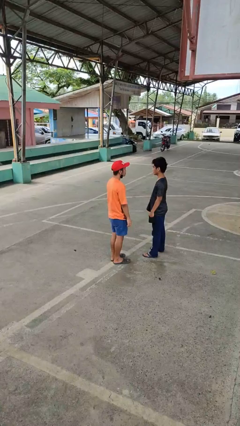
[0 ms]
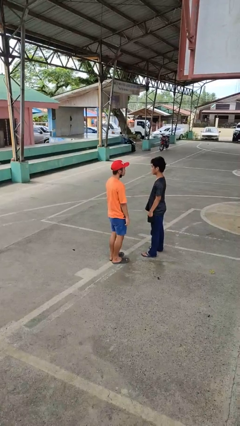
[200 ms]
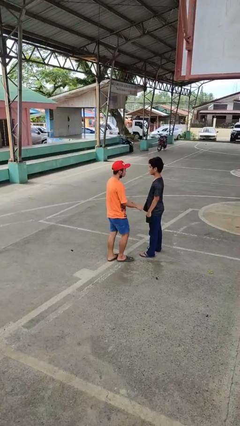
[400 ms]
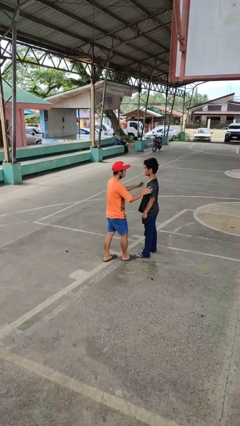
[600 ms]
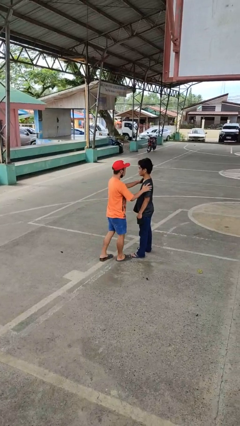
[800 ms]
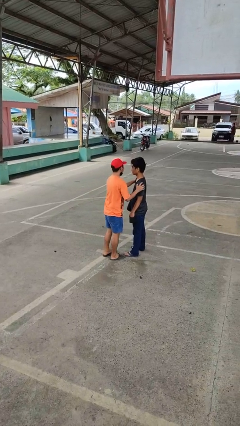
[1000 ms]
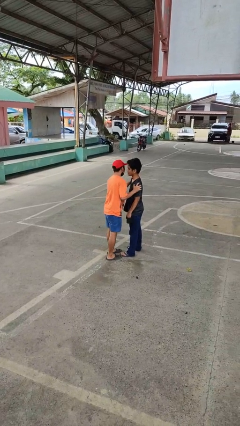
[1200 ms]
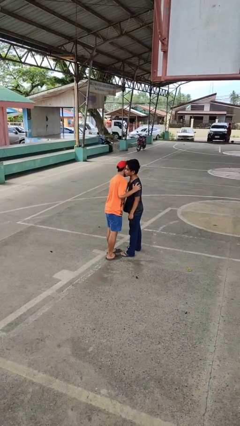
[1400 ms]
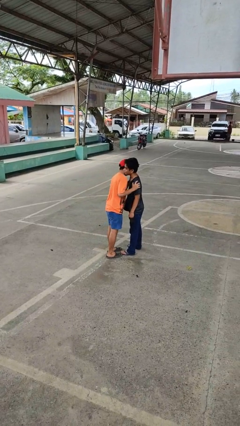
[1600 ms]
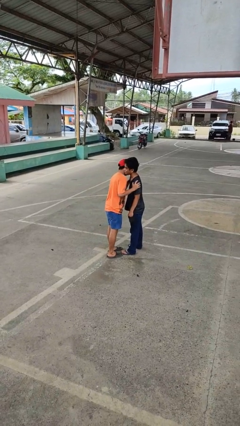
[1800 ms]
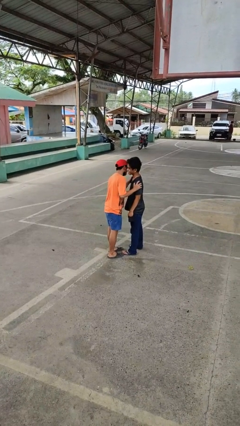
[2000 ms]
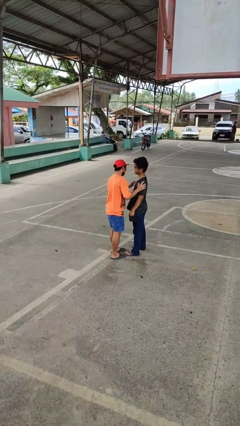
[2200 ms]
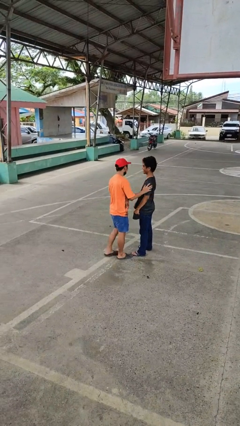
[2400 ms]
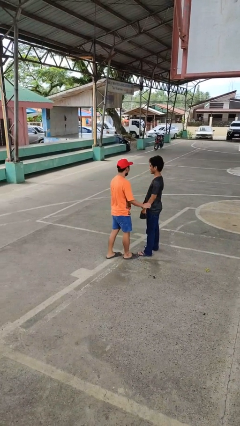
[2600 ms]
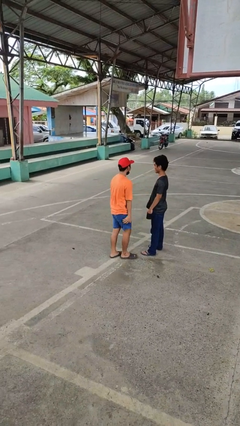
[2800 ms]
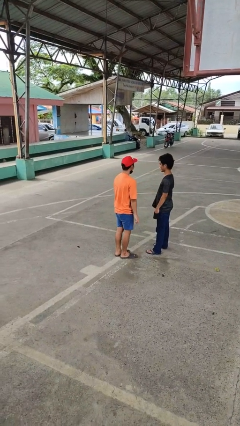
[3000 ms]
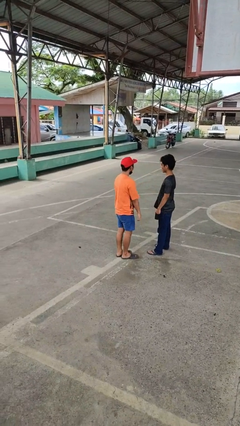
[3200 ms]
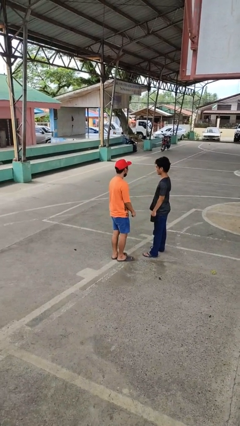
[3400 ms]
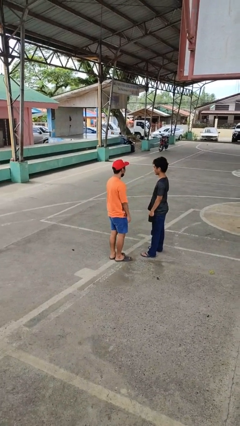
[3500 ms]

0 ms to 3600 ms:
person kisses cheek of person

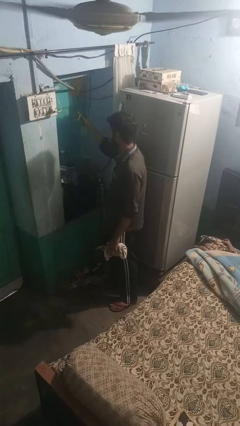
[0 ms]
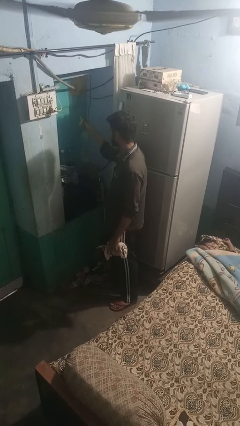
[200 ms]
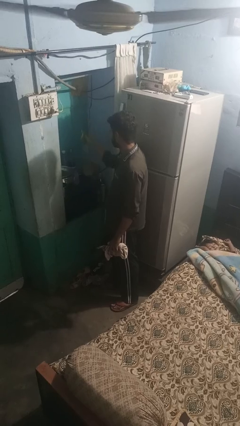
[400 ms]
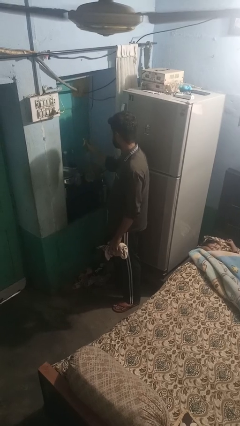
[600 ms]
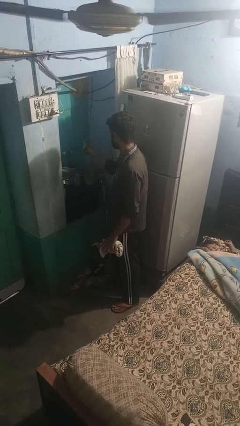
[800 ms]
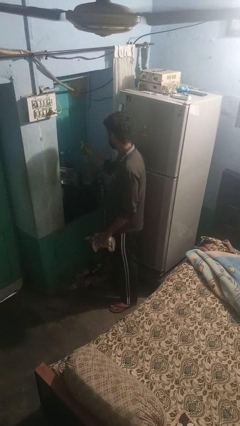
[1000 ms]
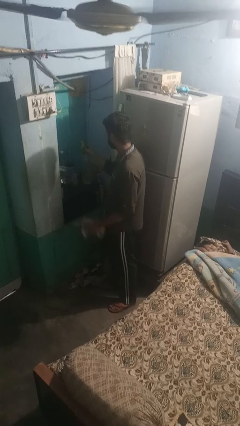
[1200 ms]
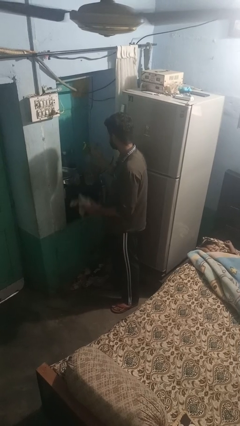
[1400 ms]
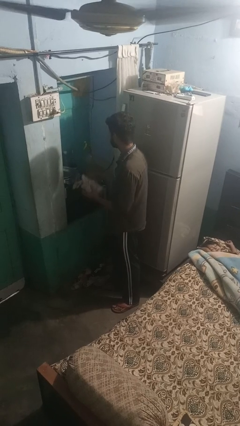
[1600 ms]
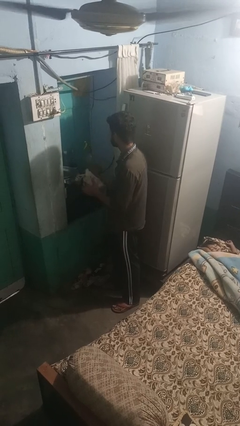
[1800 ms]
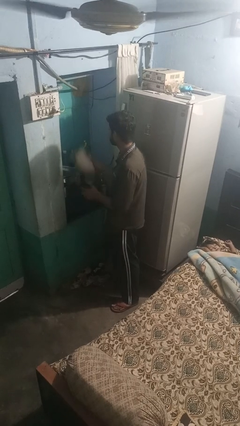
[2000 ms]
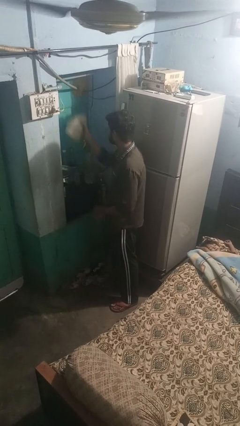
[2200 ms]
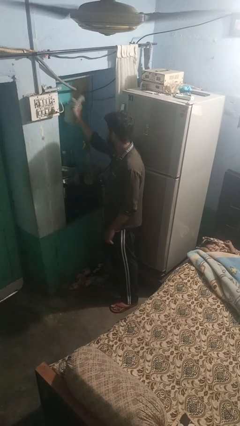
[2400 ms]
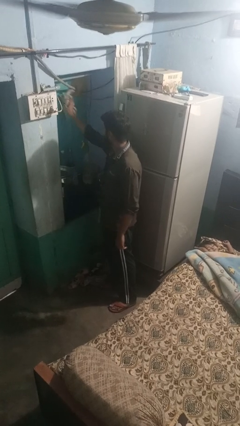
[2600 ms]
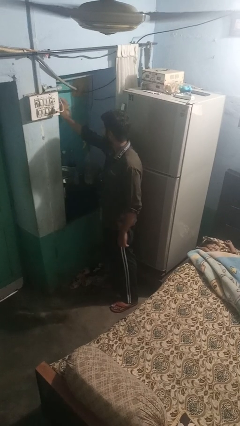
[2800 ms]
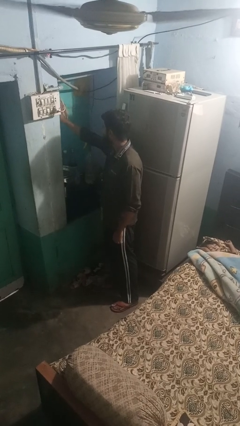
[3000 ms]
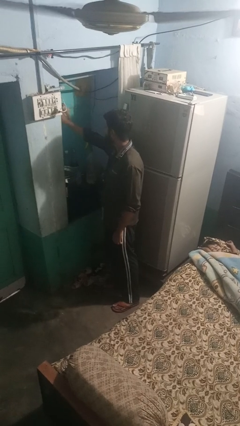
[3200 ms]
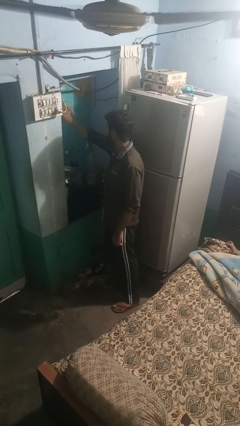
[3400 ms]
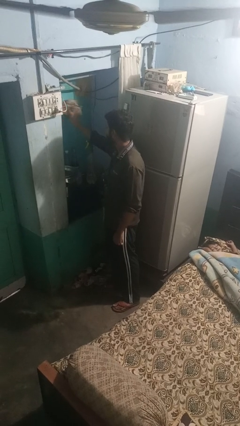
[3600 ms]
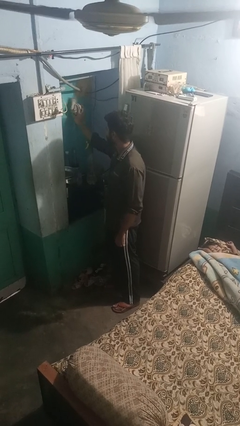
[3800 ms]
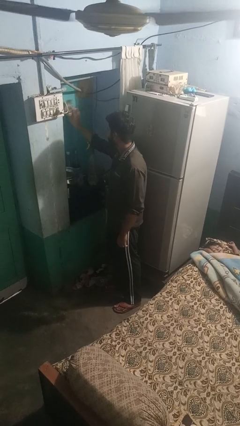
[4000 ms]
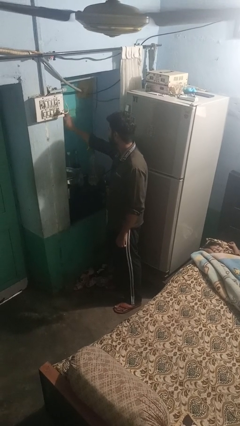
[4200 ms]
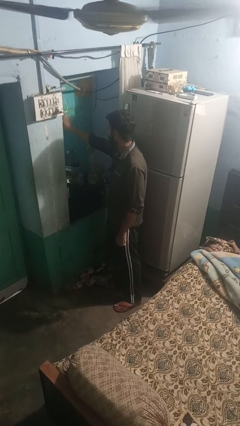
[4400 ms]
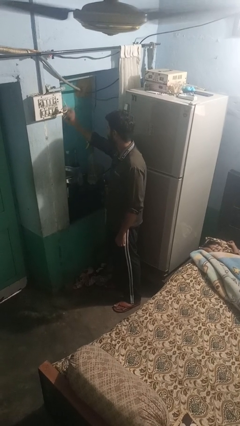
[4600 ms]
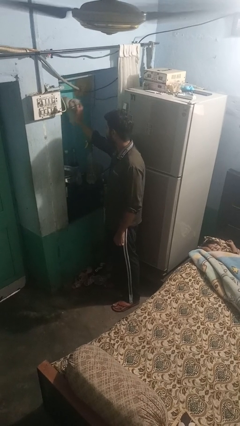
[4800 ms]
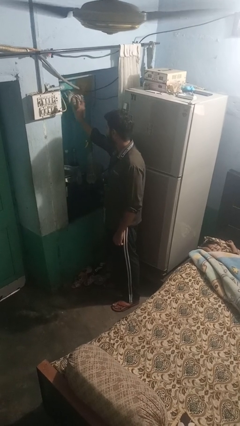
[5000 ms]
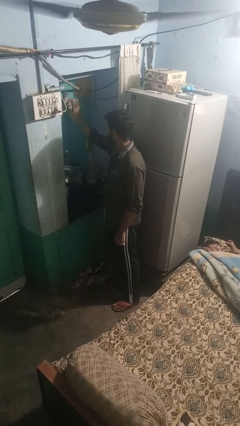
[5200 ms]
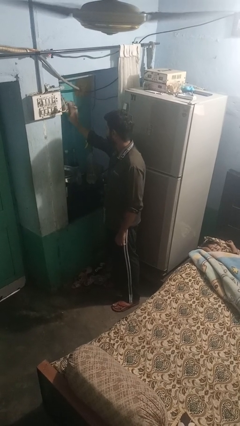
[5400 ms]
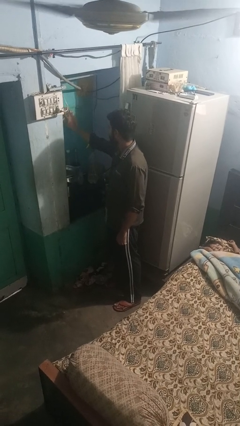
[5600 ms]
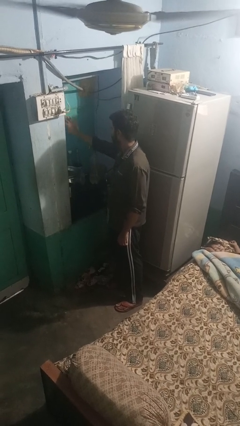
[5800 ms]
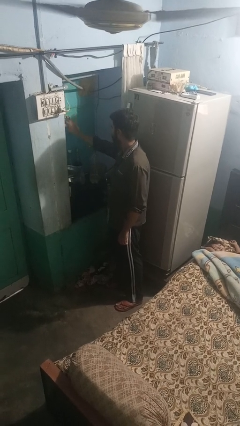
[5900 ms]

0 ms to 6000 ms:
person washes window

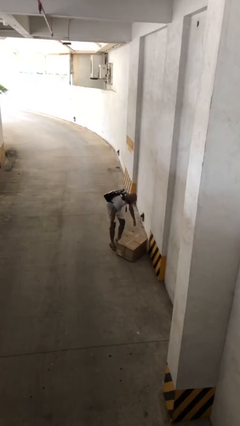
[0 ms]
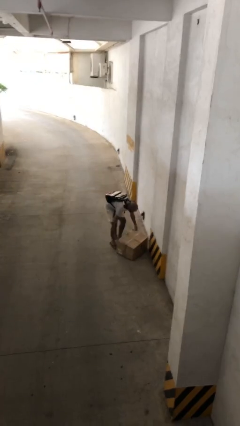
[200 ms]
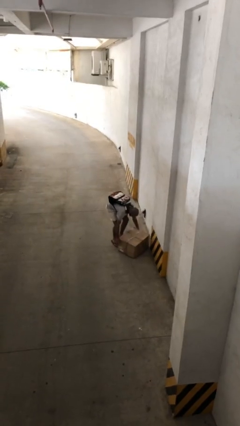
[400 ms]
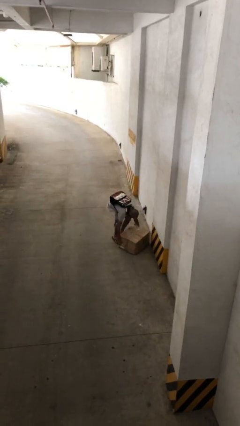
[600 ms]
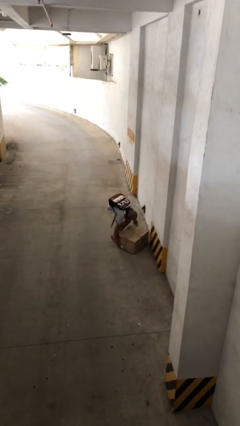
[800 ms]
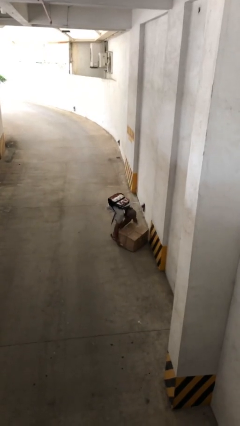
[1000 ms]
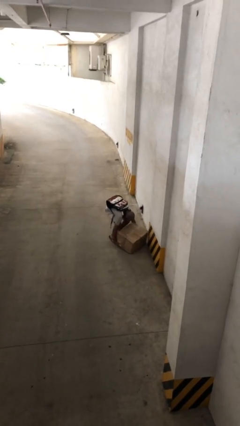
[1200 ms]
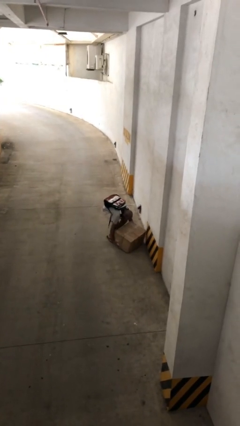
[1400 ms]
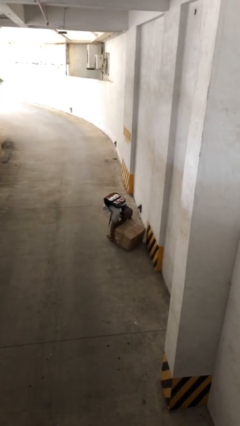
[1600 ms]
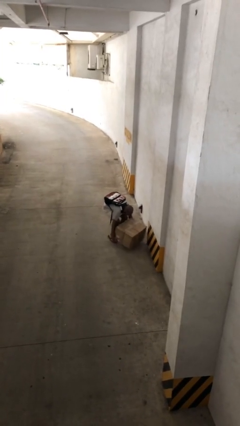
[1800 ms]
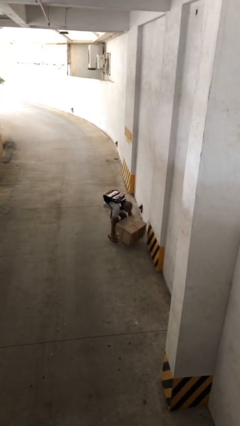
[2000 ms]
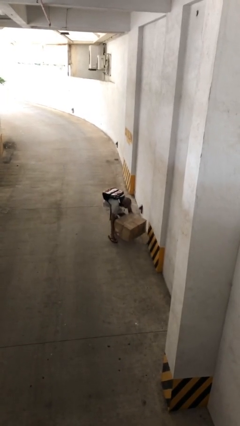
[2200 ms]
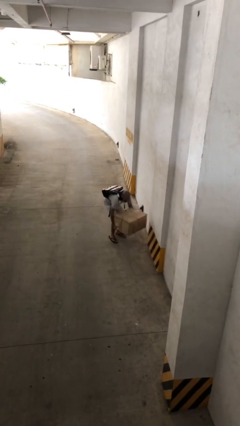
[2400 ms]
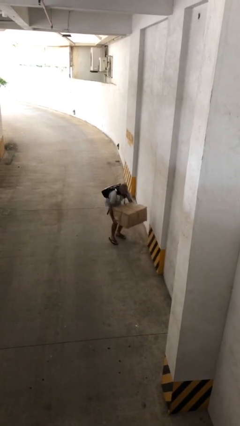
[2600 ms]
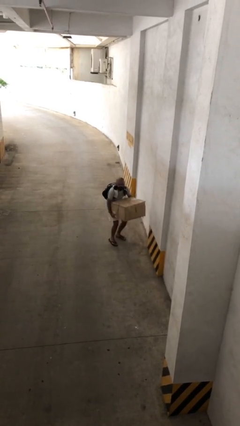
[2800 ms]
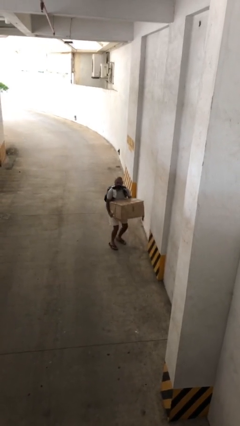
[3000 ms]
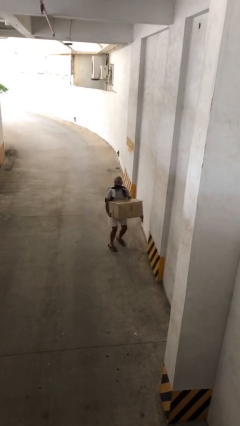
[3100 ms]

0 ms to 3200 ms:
person picks up object from floor

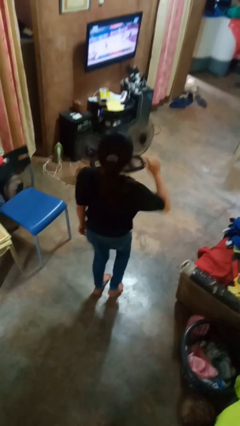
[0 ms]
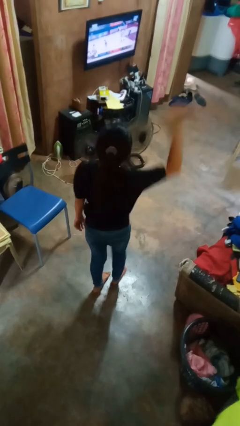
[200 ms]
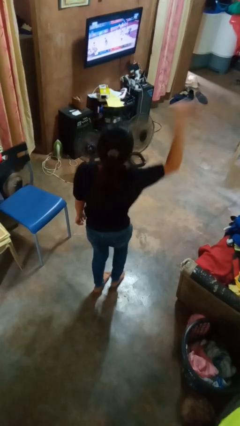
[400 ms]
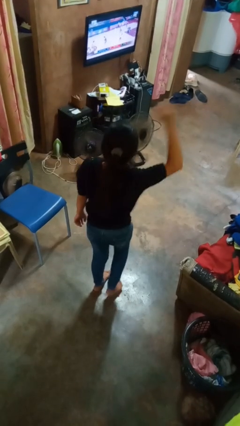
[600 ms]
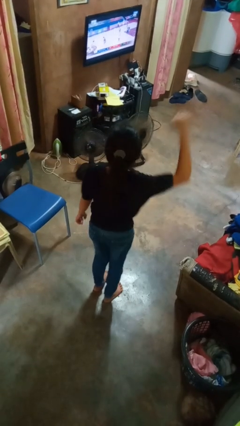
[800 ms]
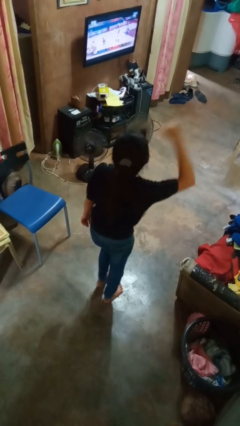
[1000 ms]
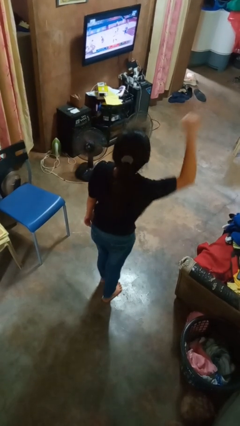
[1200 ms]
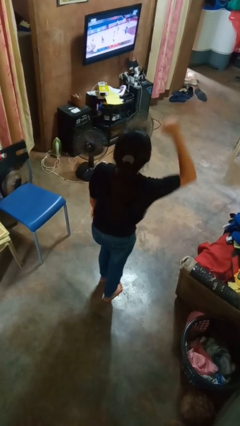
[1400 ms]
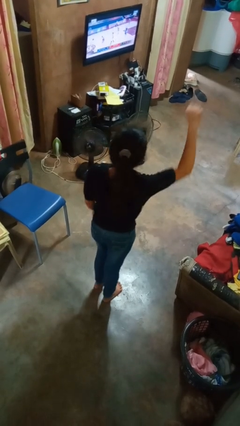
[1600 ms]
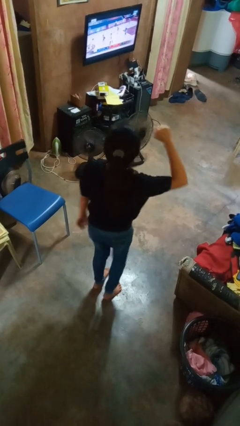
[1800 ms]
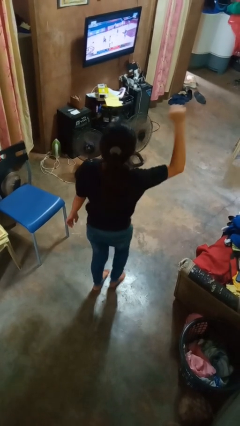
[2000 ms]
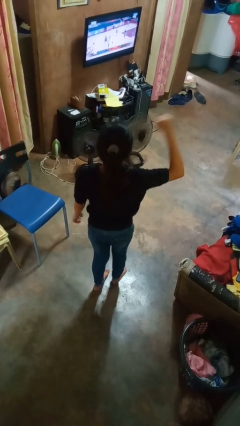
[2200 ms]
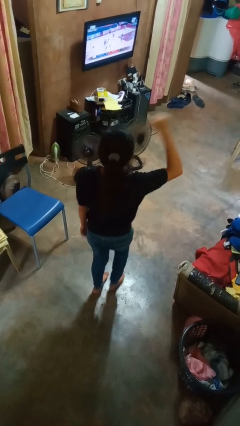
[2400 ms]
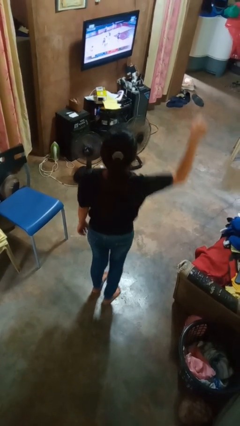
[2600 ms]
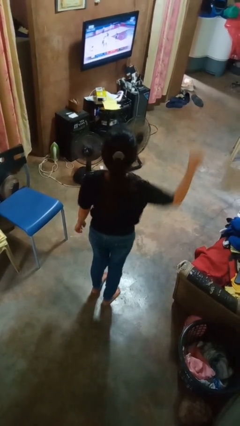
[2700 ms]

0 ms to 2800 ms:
person dances in place

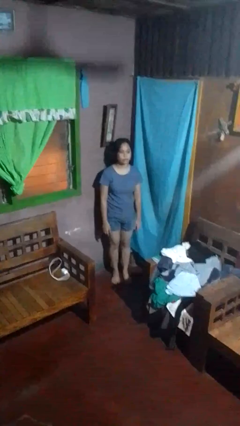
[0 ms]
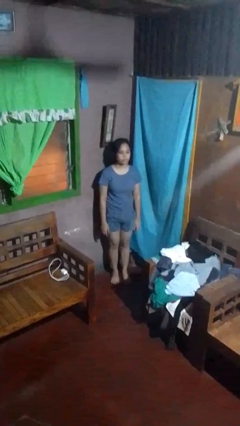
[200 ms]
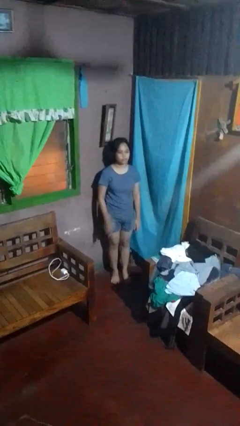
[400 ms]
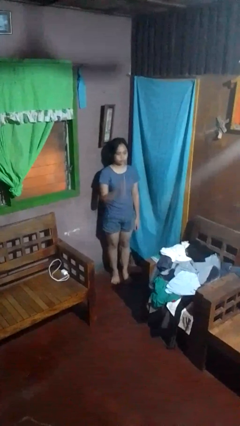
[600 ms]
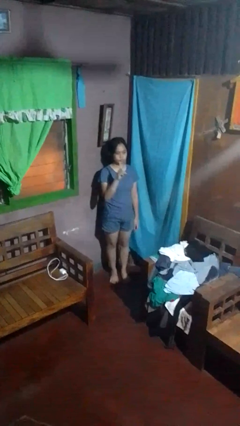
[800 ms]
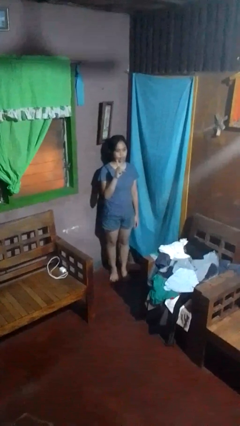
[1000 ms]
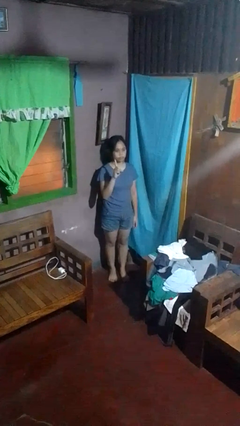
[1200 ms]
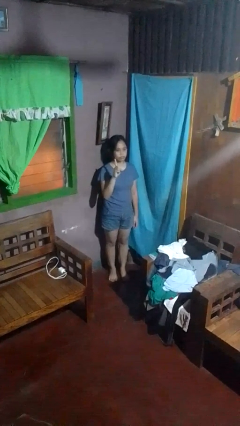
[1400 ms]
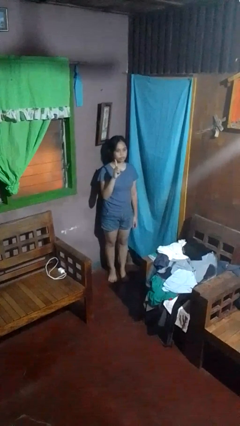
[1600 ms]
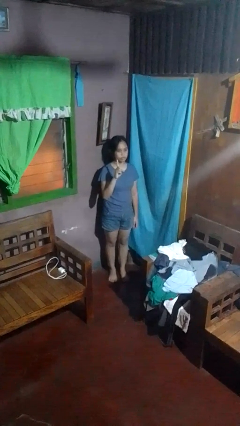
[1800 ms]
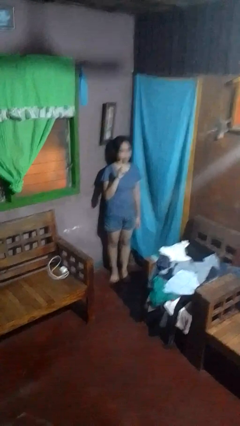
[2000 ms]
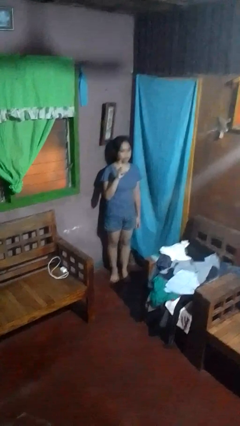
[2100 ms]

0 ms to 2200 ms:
person gestures number one
